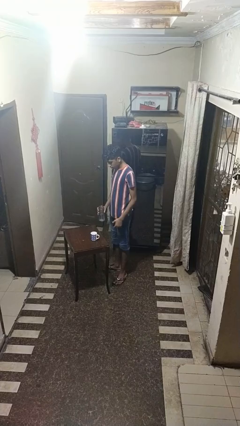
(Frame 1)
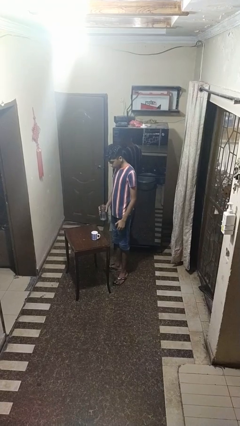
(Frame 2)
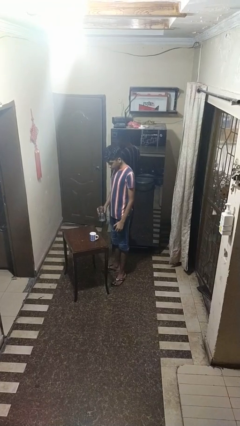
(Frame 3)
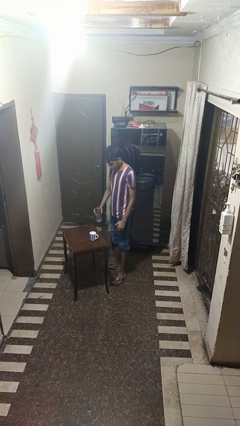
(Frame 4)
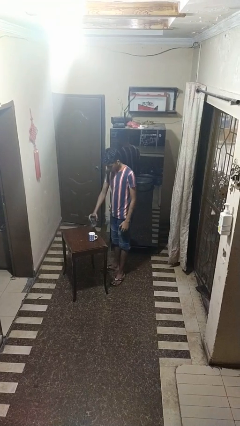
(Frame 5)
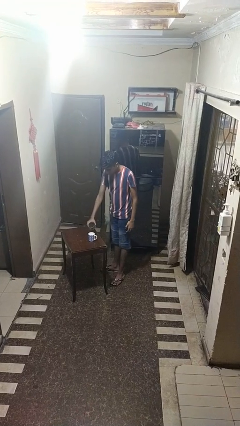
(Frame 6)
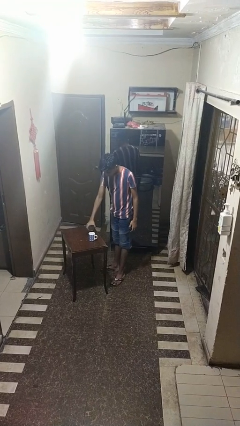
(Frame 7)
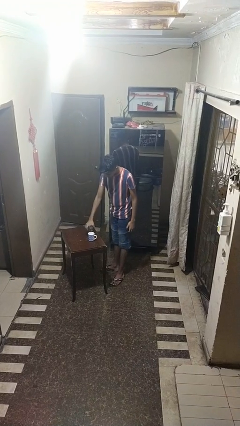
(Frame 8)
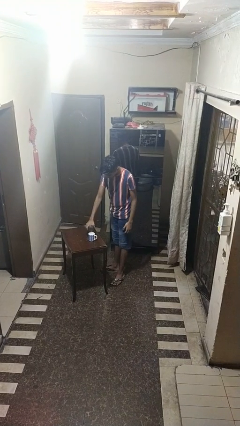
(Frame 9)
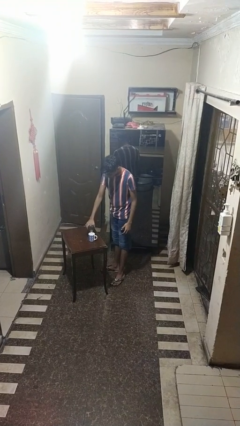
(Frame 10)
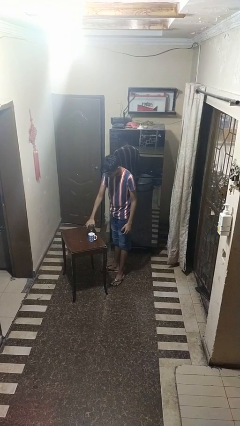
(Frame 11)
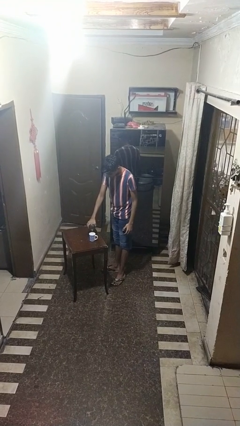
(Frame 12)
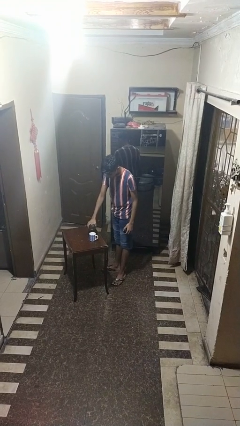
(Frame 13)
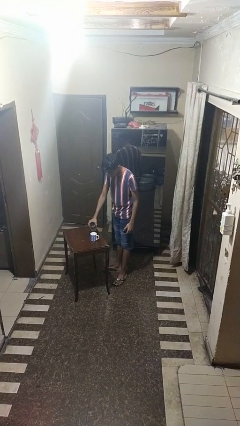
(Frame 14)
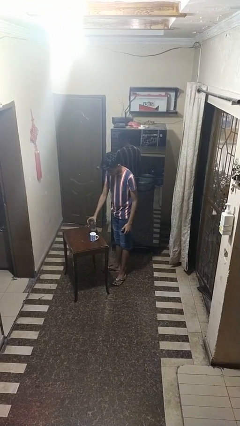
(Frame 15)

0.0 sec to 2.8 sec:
person pours liquid into cup

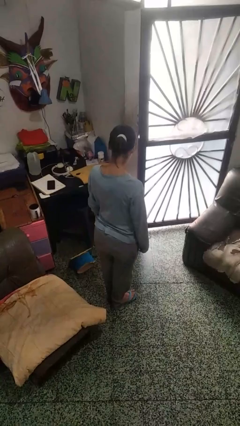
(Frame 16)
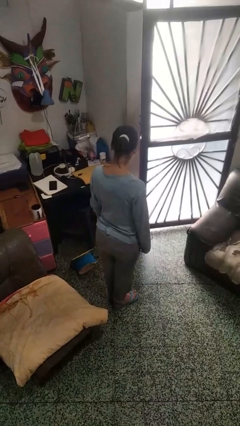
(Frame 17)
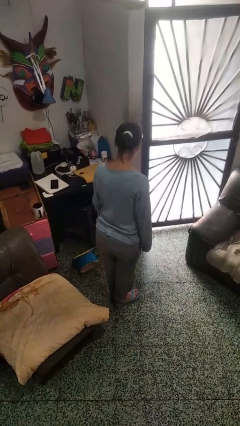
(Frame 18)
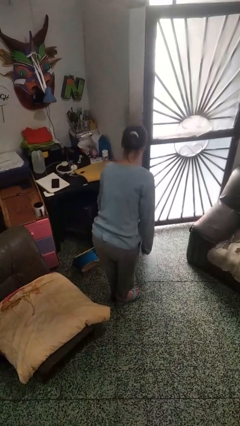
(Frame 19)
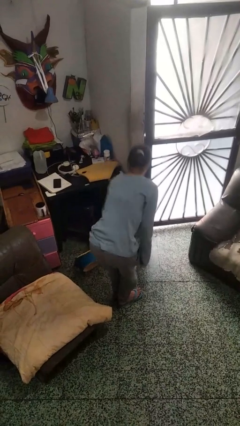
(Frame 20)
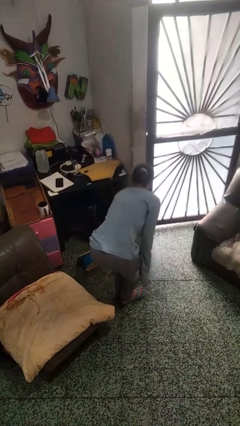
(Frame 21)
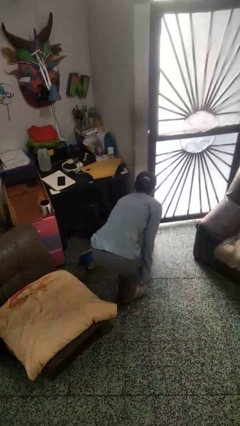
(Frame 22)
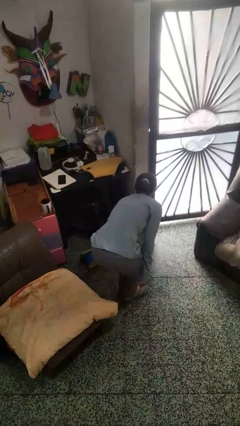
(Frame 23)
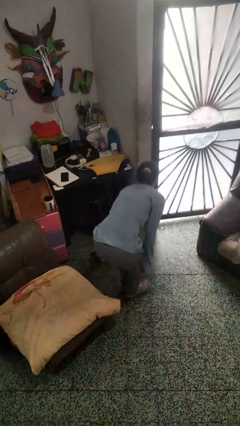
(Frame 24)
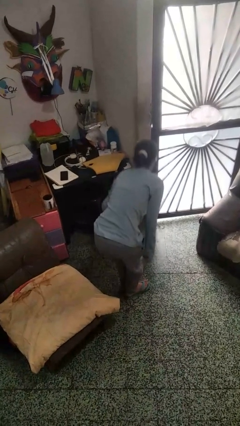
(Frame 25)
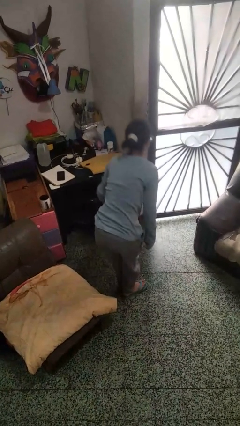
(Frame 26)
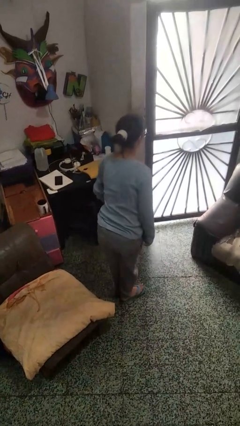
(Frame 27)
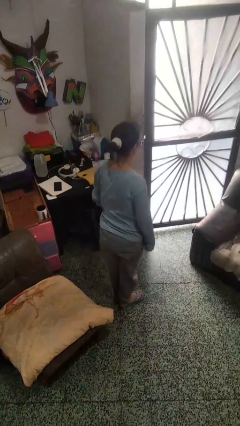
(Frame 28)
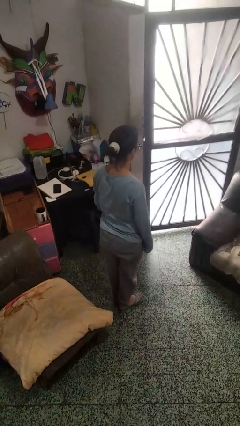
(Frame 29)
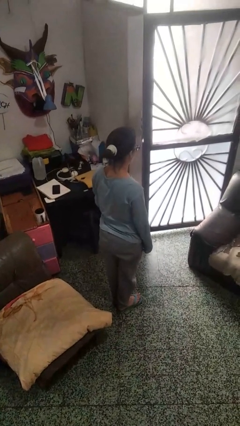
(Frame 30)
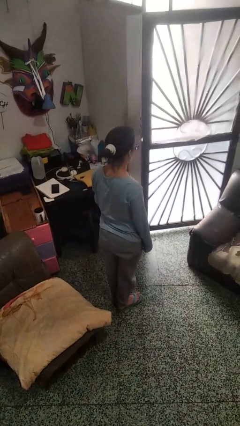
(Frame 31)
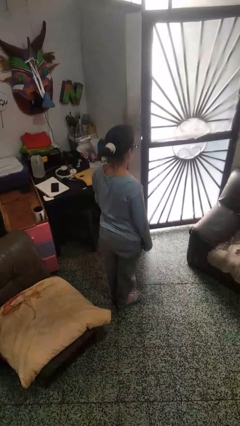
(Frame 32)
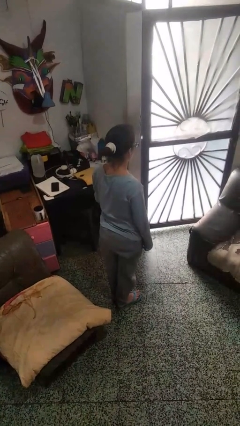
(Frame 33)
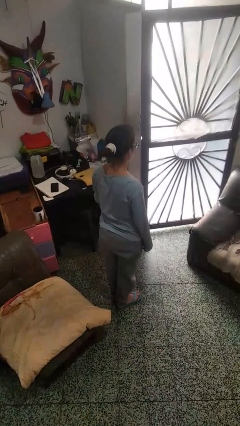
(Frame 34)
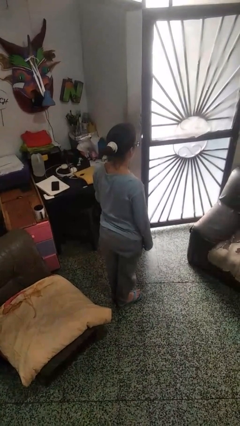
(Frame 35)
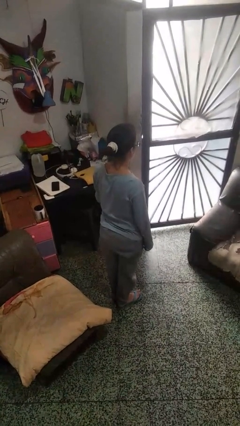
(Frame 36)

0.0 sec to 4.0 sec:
person picks up object from floor

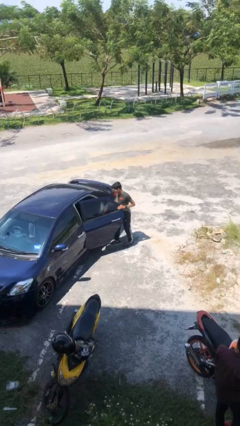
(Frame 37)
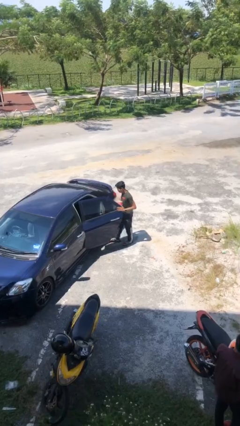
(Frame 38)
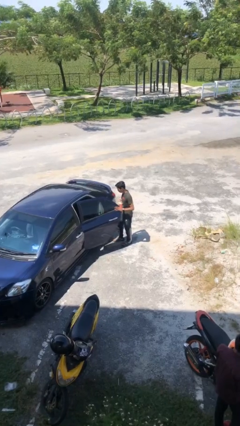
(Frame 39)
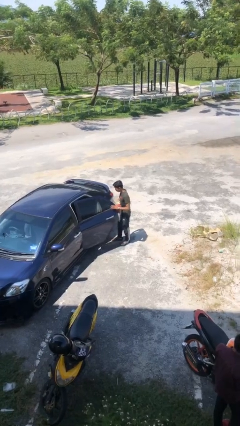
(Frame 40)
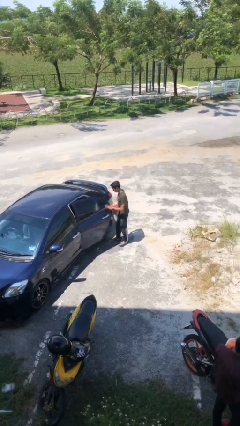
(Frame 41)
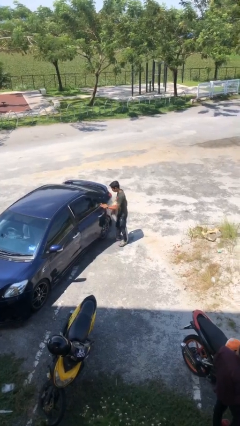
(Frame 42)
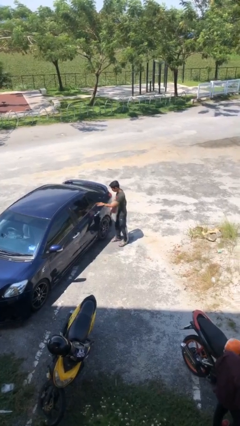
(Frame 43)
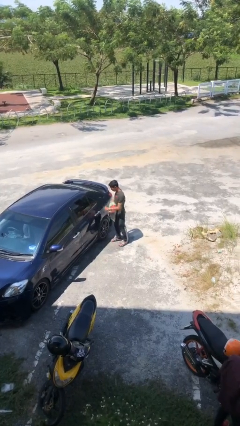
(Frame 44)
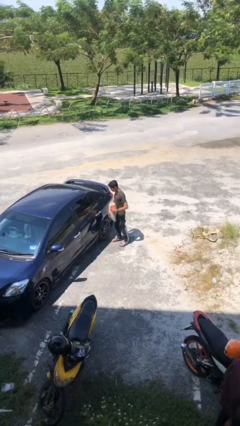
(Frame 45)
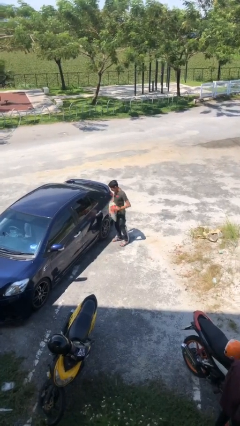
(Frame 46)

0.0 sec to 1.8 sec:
person closes car door

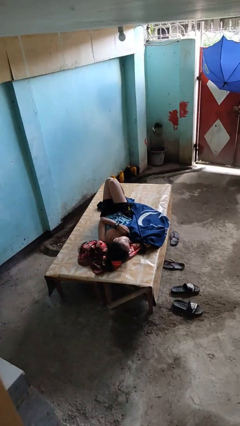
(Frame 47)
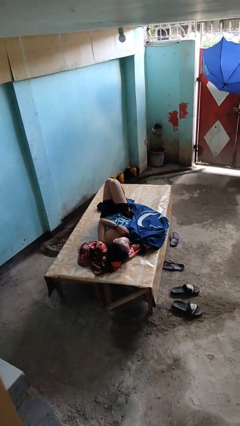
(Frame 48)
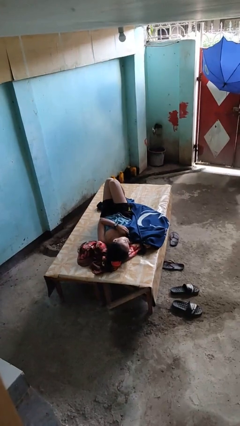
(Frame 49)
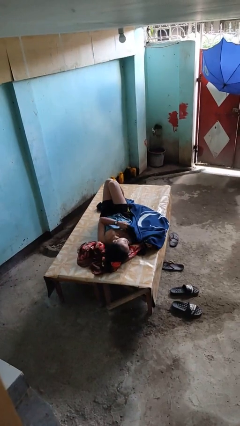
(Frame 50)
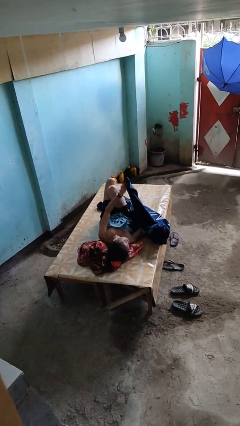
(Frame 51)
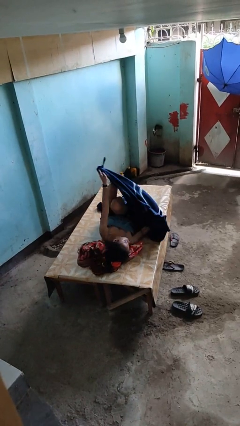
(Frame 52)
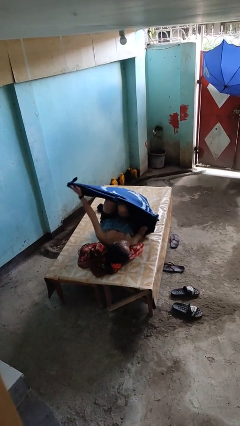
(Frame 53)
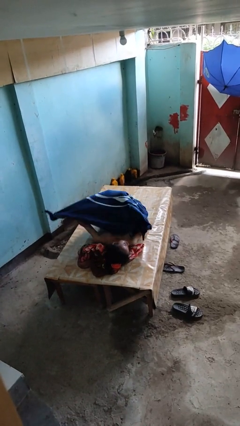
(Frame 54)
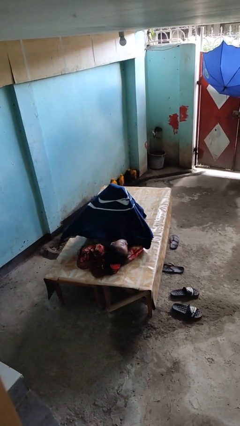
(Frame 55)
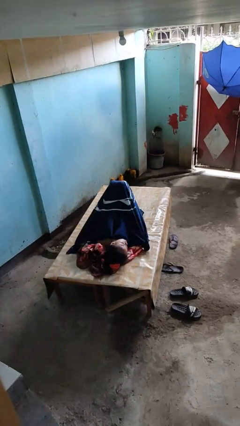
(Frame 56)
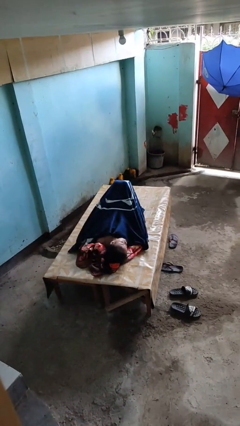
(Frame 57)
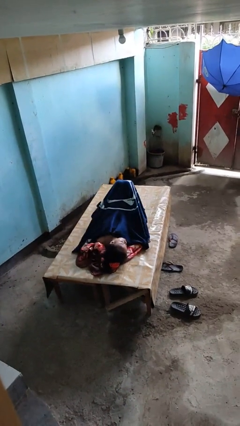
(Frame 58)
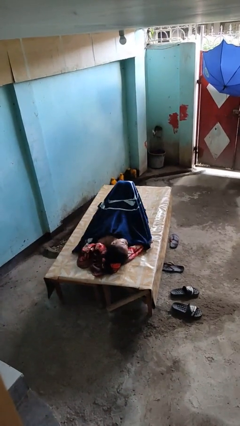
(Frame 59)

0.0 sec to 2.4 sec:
person covers with bedsheets

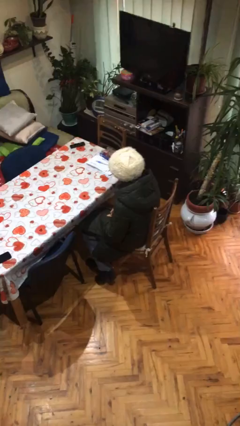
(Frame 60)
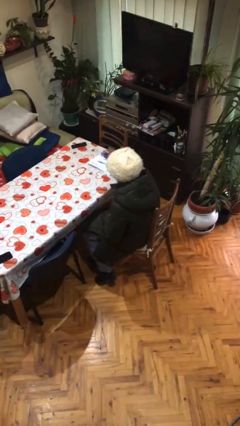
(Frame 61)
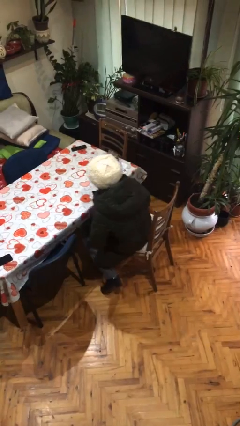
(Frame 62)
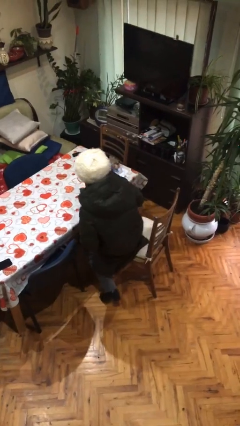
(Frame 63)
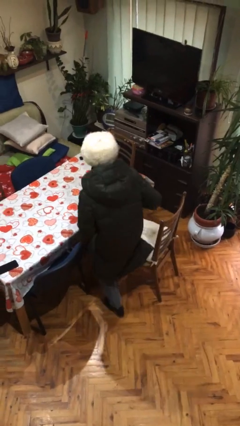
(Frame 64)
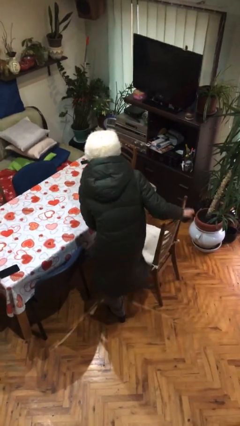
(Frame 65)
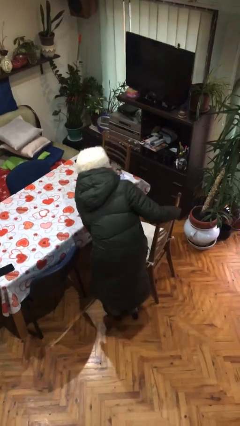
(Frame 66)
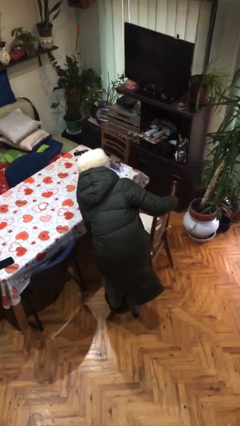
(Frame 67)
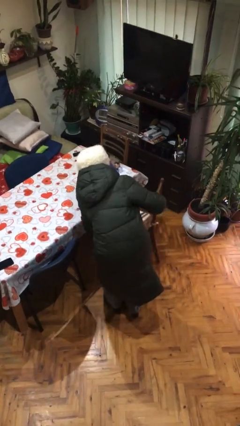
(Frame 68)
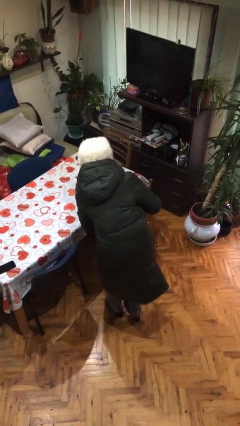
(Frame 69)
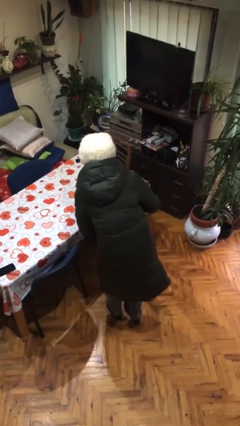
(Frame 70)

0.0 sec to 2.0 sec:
person stands up

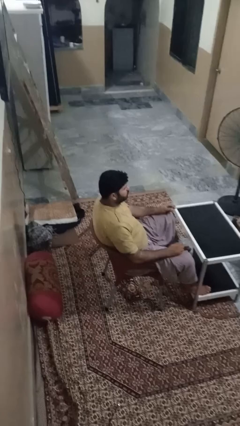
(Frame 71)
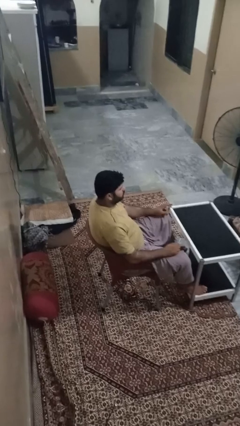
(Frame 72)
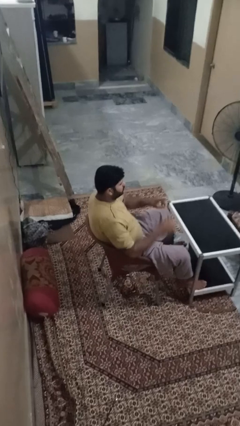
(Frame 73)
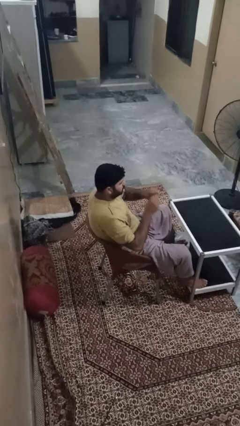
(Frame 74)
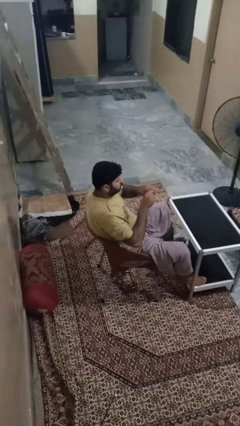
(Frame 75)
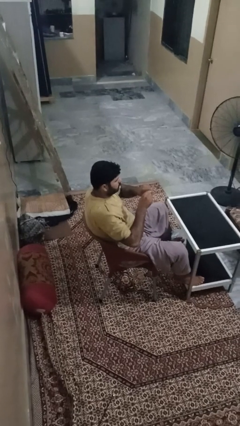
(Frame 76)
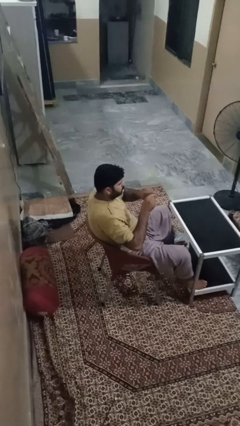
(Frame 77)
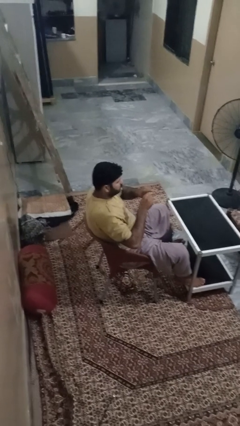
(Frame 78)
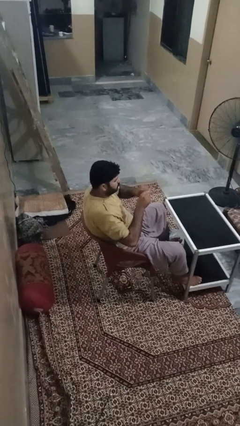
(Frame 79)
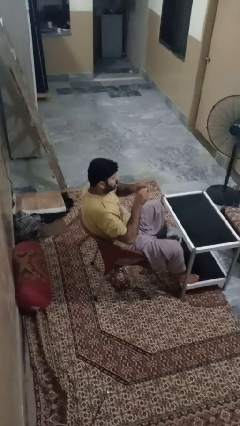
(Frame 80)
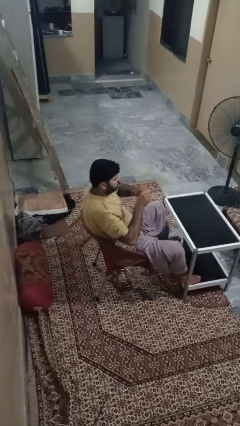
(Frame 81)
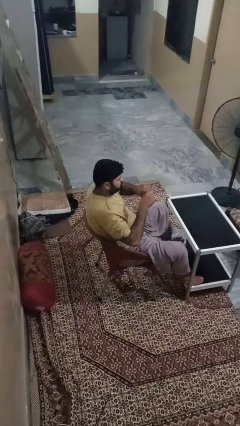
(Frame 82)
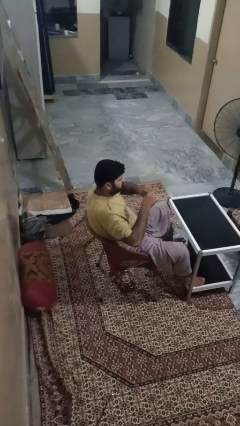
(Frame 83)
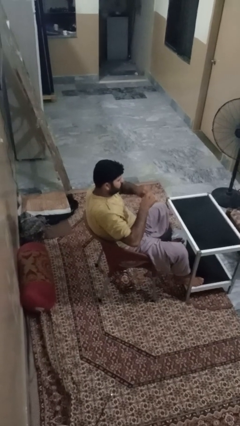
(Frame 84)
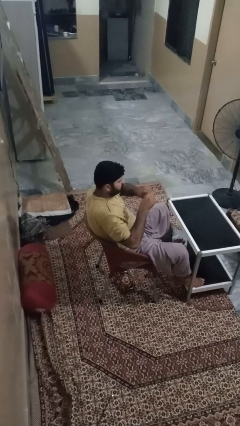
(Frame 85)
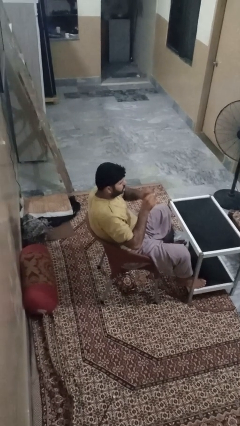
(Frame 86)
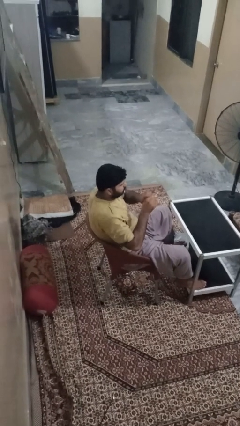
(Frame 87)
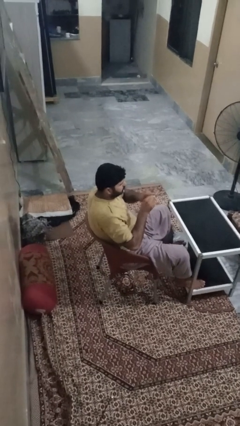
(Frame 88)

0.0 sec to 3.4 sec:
person files fingernails

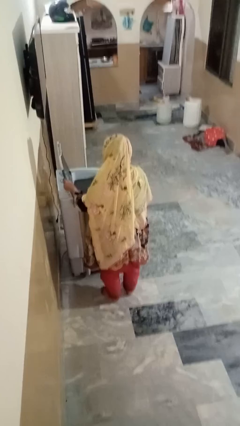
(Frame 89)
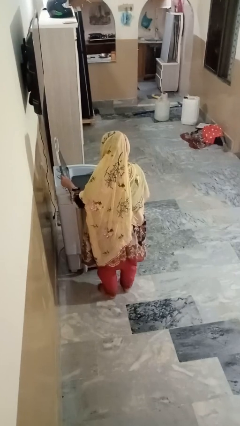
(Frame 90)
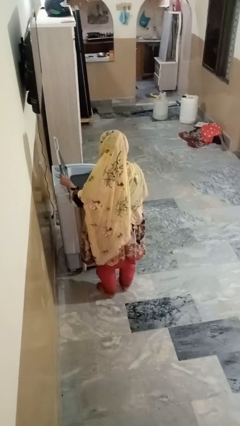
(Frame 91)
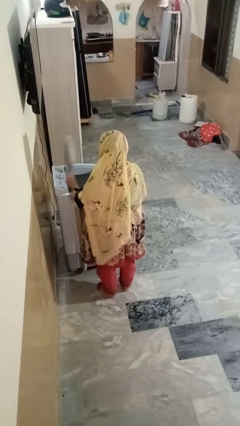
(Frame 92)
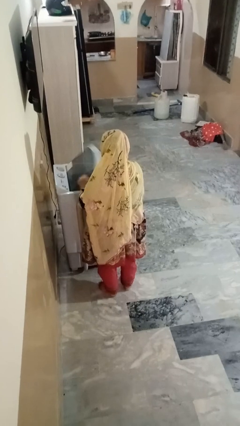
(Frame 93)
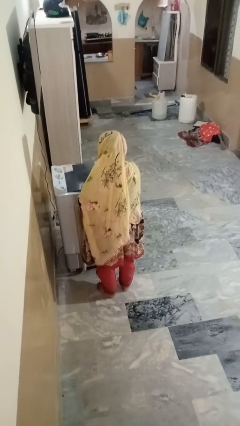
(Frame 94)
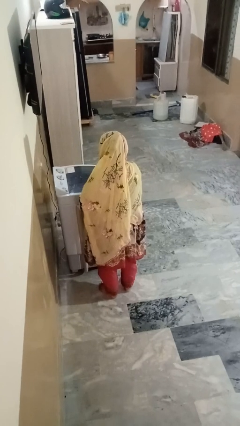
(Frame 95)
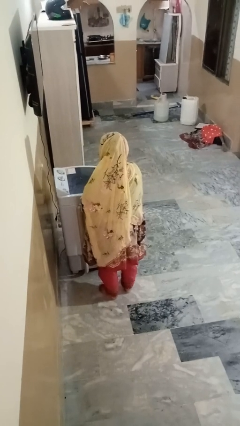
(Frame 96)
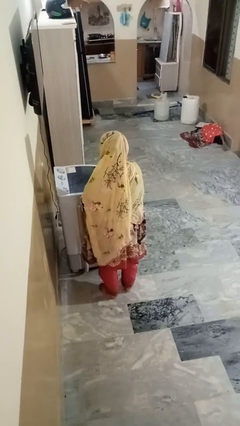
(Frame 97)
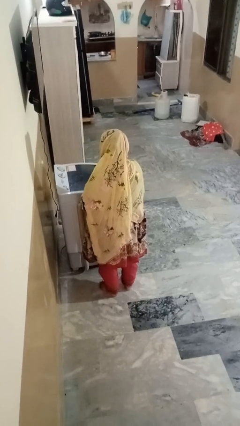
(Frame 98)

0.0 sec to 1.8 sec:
person closes clothes washer
